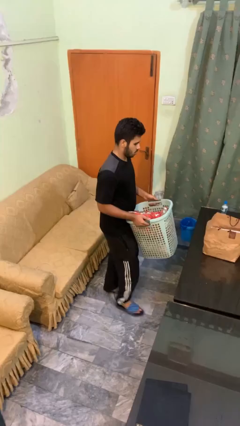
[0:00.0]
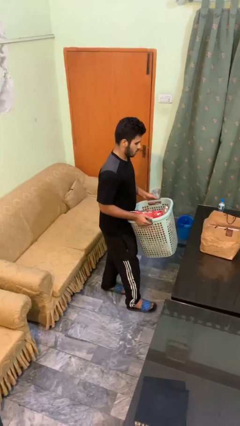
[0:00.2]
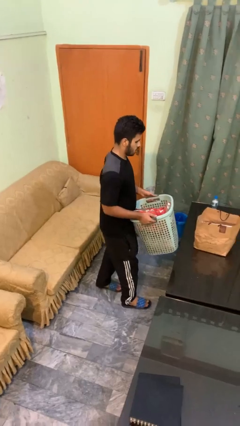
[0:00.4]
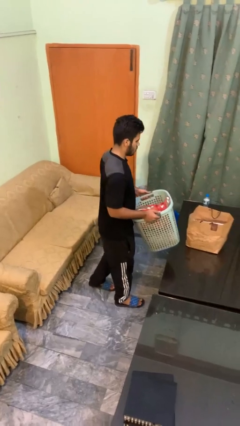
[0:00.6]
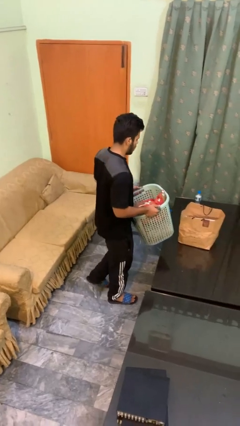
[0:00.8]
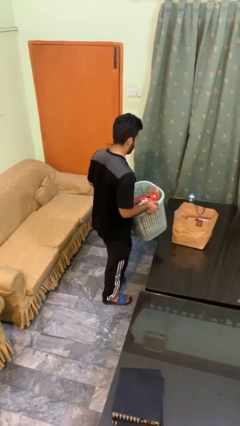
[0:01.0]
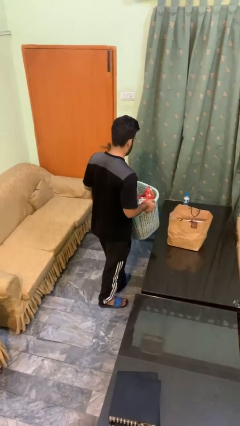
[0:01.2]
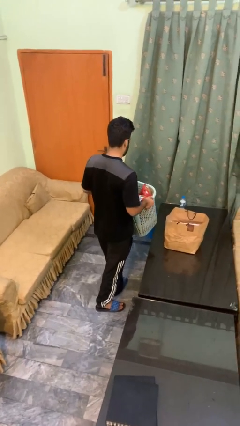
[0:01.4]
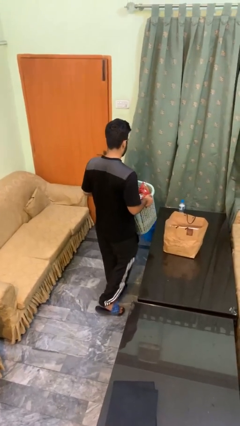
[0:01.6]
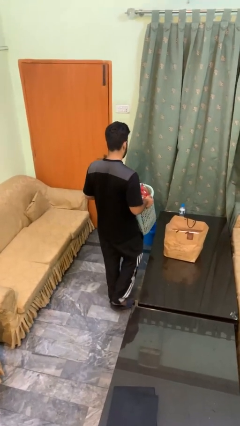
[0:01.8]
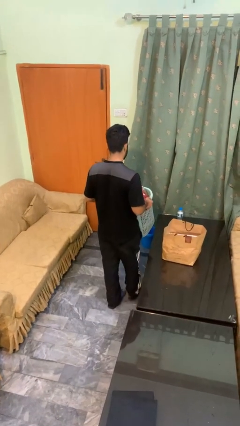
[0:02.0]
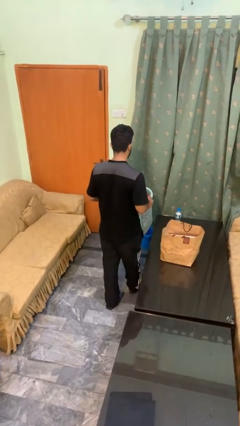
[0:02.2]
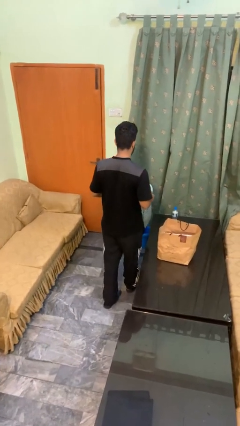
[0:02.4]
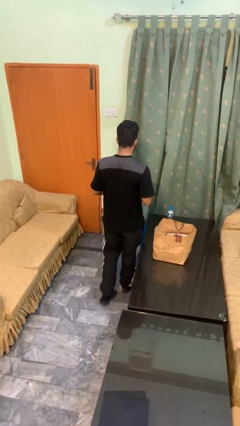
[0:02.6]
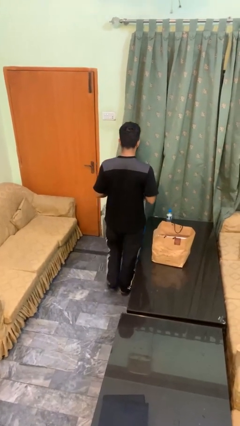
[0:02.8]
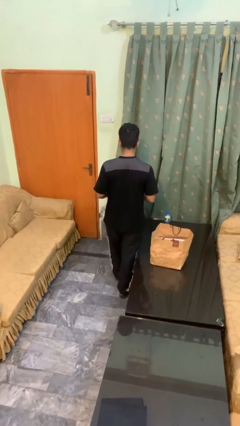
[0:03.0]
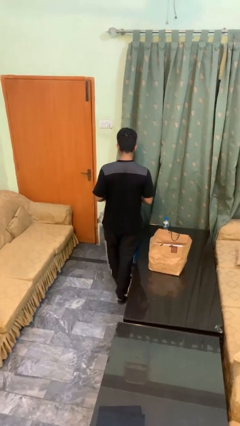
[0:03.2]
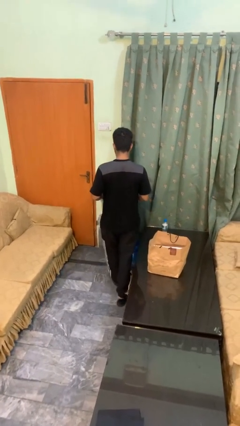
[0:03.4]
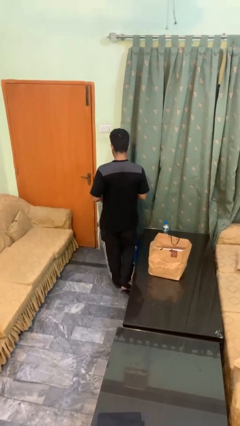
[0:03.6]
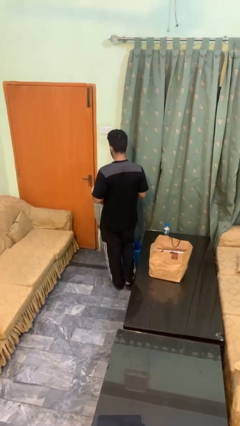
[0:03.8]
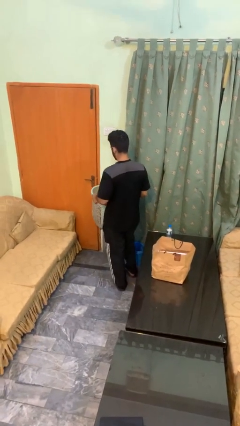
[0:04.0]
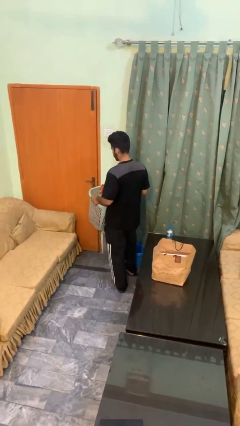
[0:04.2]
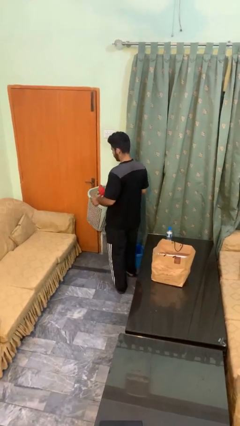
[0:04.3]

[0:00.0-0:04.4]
person carries laundry basket

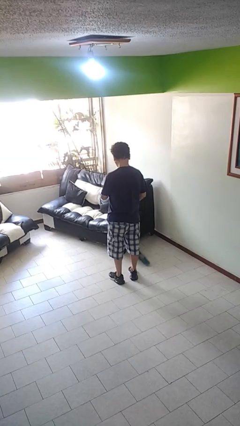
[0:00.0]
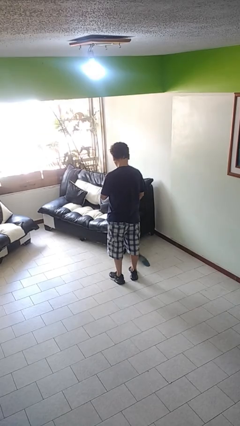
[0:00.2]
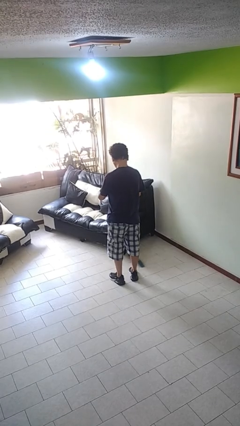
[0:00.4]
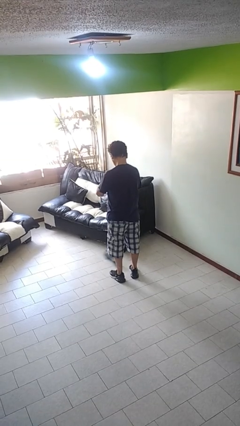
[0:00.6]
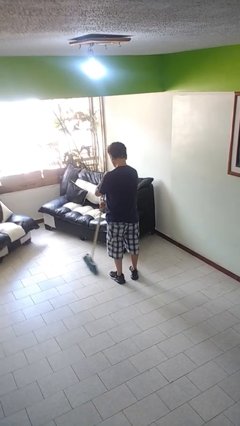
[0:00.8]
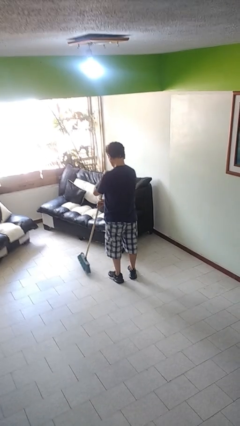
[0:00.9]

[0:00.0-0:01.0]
person sweeps floor

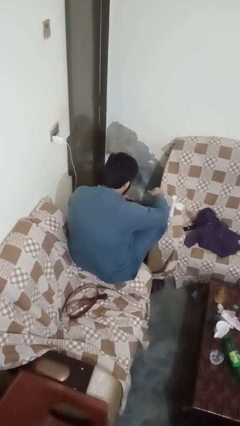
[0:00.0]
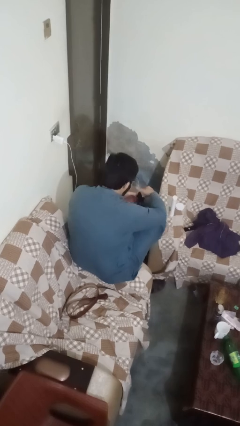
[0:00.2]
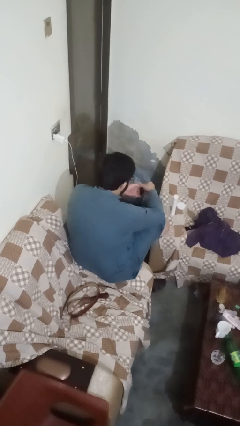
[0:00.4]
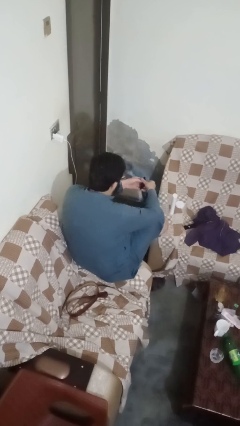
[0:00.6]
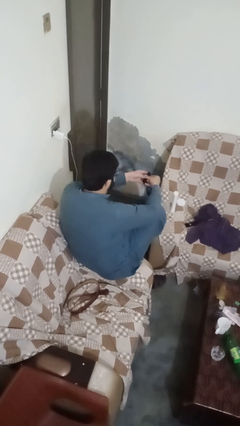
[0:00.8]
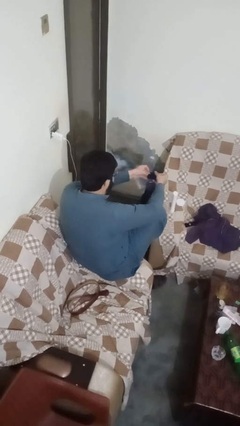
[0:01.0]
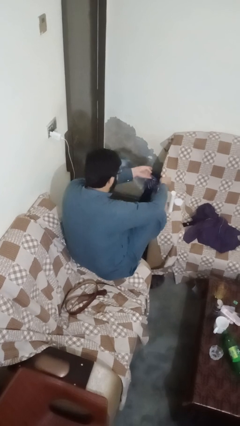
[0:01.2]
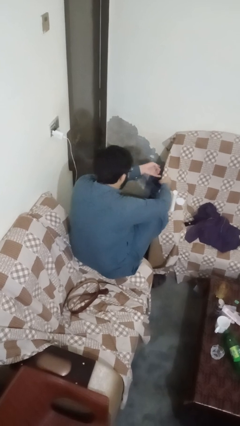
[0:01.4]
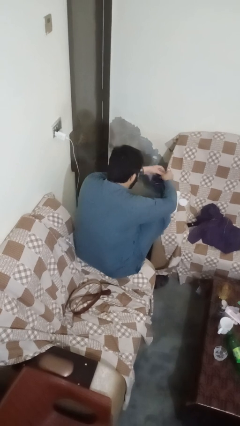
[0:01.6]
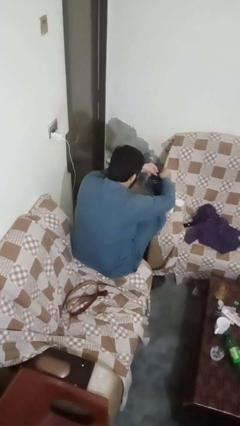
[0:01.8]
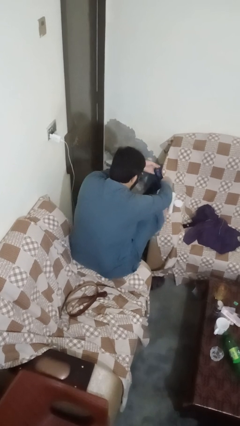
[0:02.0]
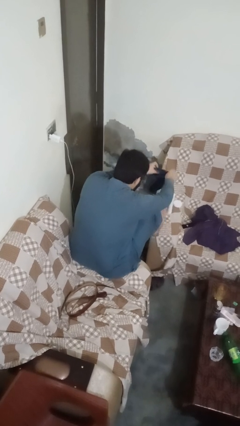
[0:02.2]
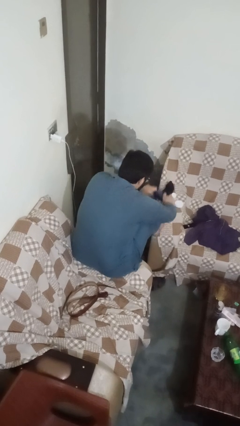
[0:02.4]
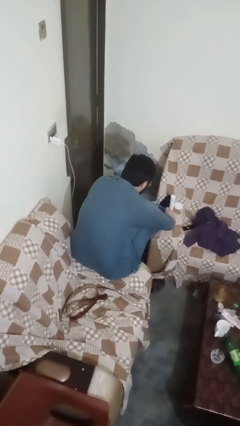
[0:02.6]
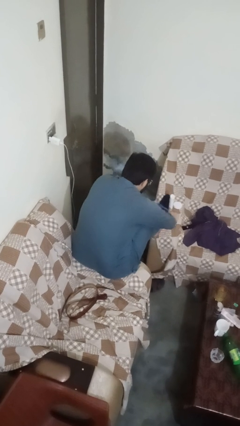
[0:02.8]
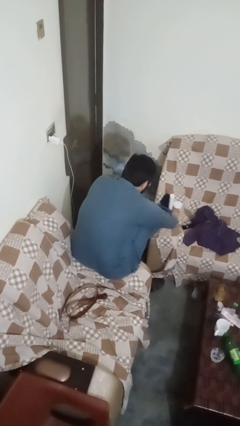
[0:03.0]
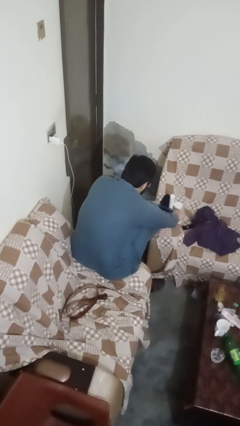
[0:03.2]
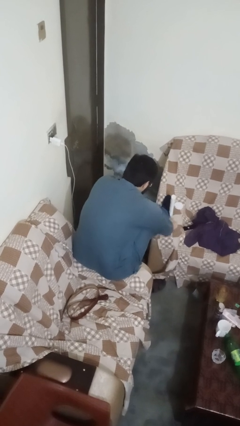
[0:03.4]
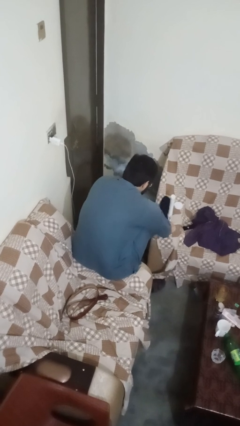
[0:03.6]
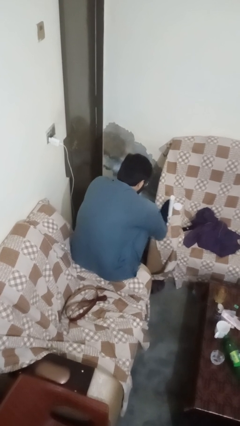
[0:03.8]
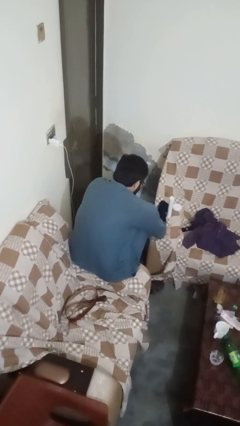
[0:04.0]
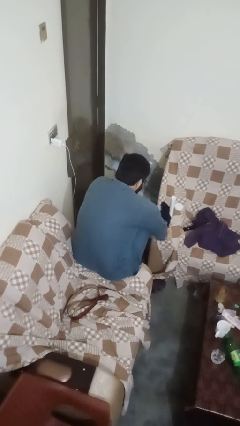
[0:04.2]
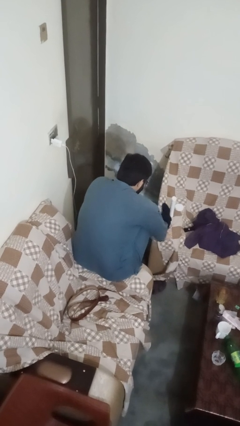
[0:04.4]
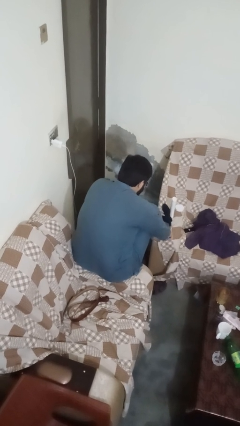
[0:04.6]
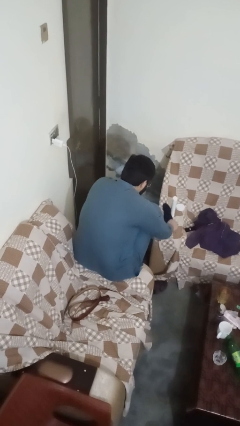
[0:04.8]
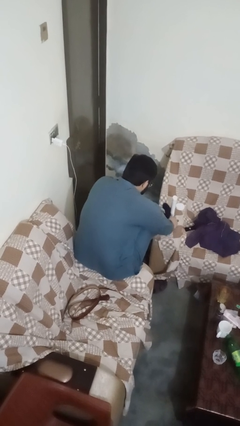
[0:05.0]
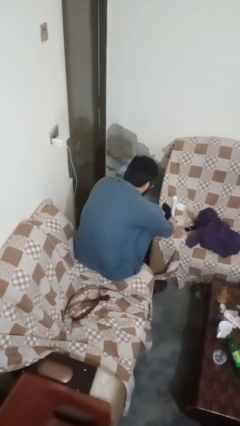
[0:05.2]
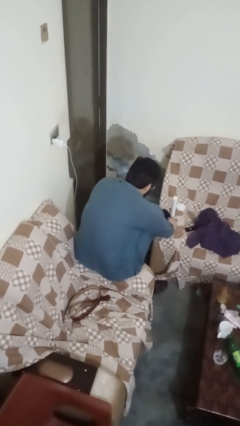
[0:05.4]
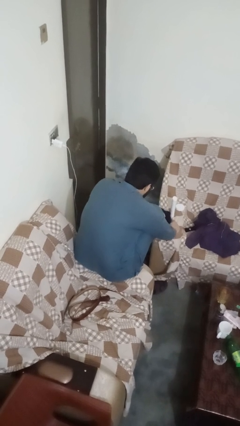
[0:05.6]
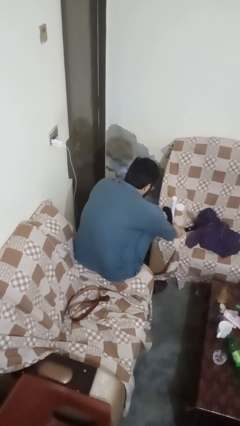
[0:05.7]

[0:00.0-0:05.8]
person puts on socks

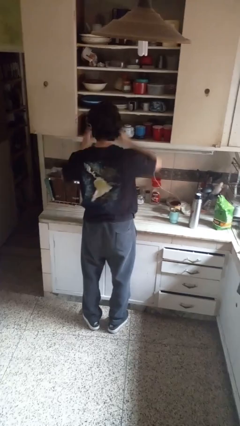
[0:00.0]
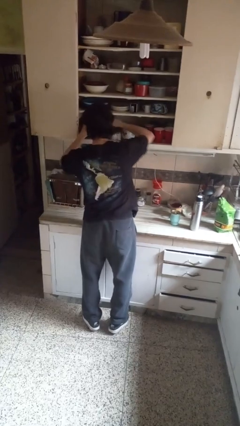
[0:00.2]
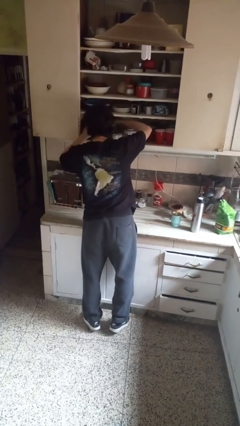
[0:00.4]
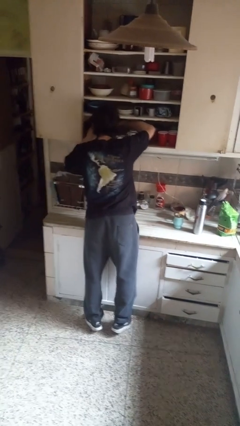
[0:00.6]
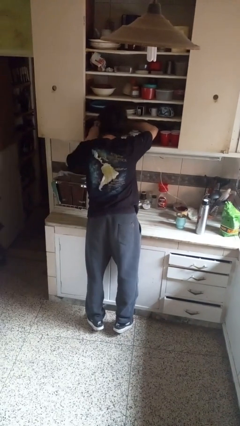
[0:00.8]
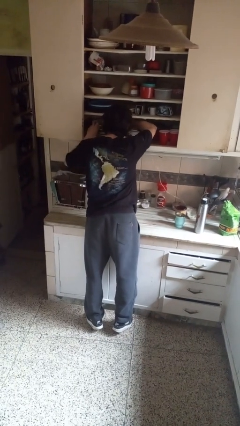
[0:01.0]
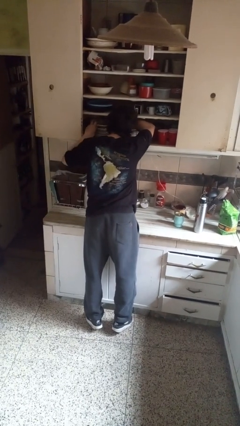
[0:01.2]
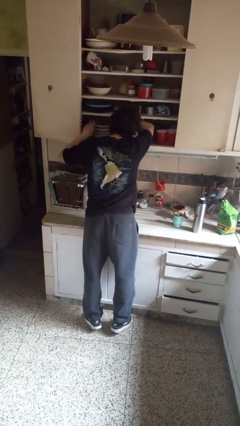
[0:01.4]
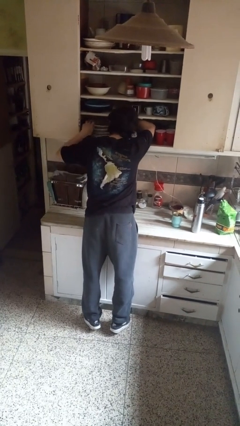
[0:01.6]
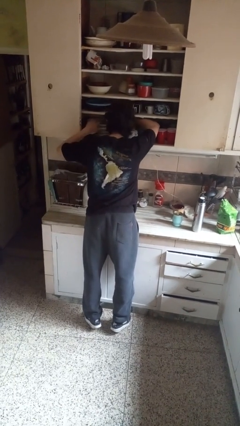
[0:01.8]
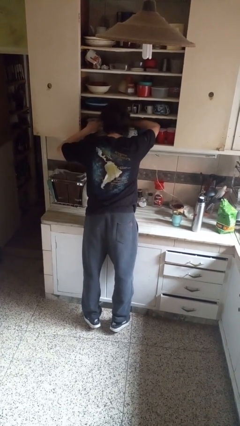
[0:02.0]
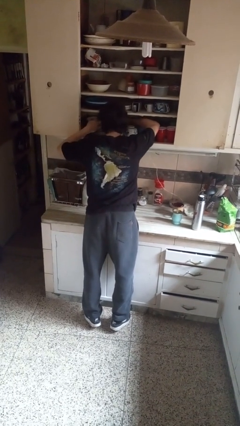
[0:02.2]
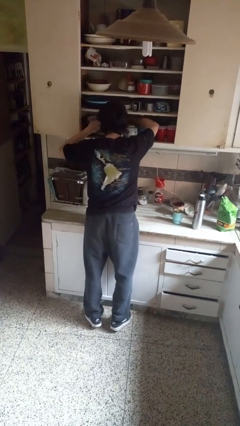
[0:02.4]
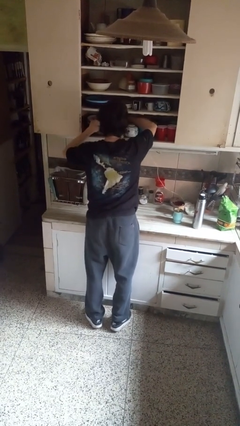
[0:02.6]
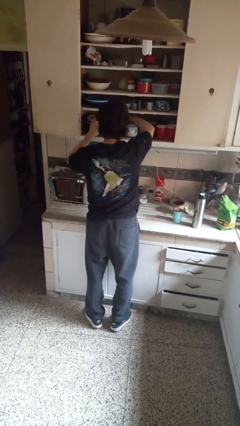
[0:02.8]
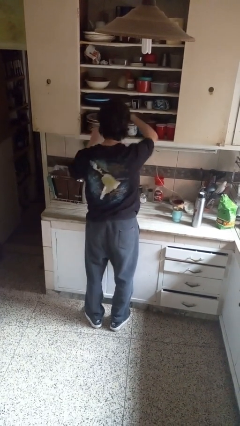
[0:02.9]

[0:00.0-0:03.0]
person searches in cabinet

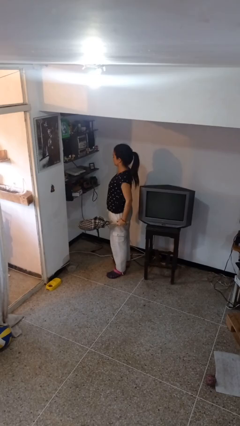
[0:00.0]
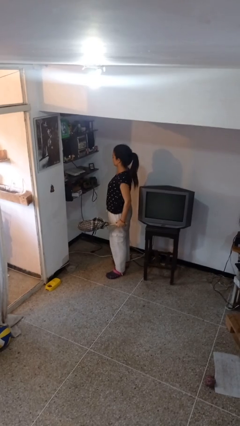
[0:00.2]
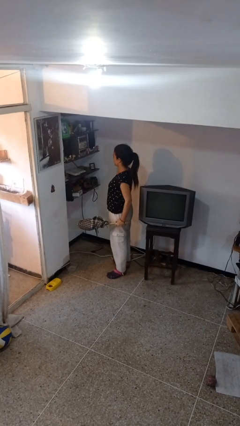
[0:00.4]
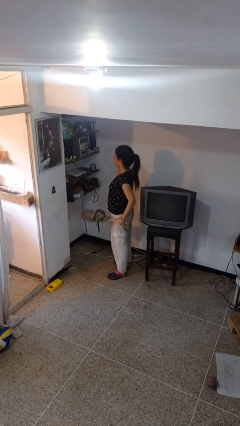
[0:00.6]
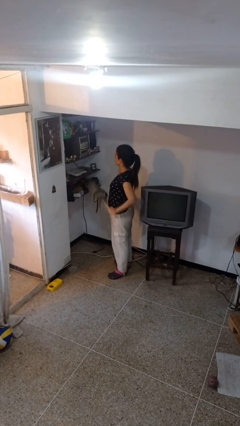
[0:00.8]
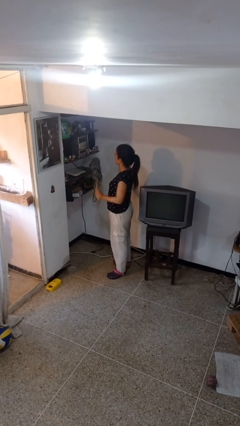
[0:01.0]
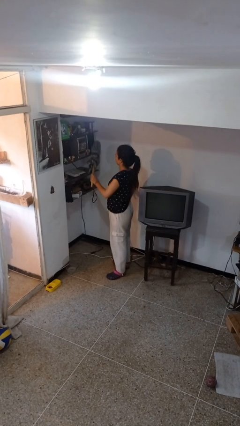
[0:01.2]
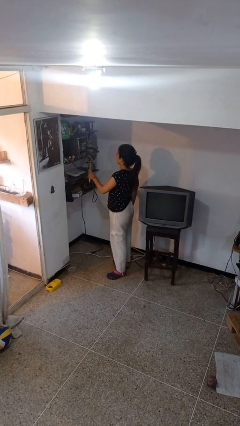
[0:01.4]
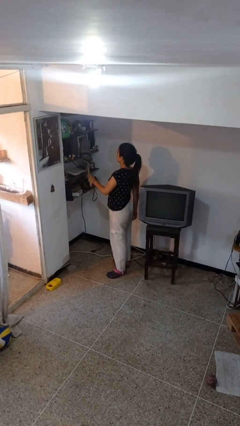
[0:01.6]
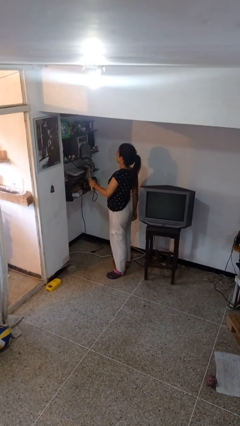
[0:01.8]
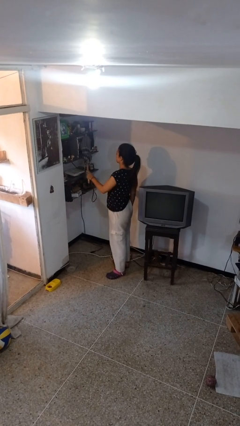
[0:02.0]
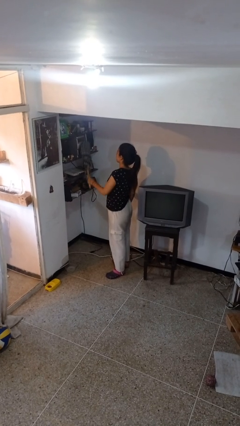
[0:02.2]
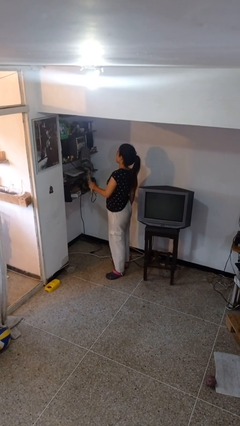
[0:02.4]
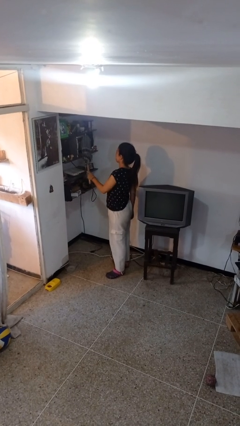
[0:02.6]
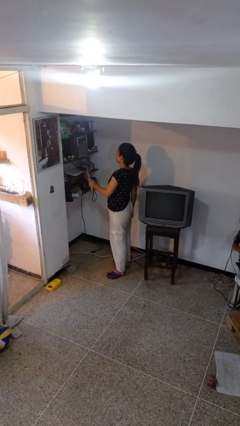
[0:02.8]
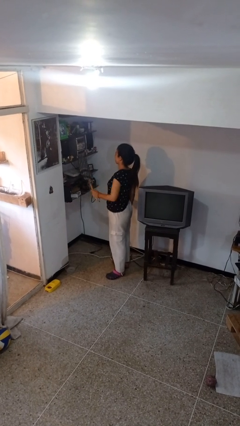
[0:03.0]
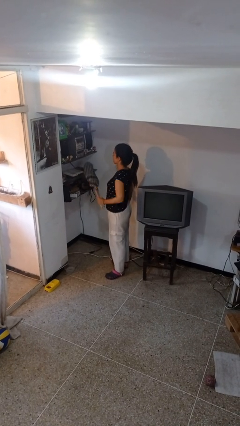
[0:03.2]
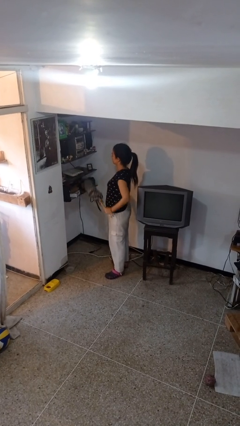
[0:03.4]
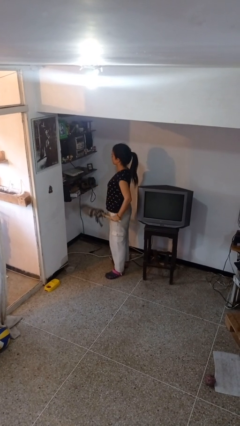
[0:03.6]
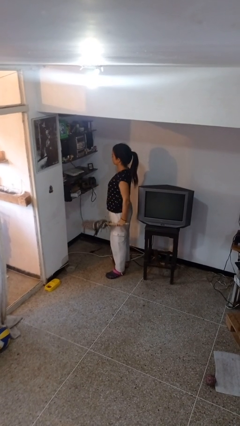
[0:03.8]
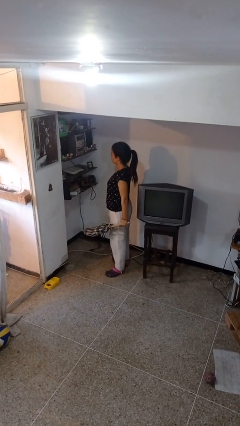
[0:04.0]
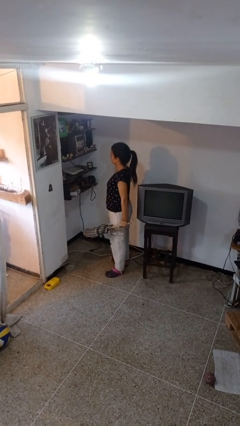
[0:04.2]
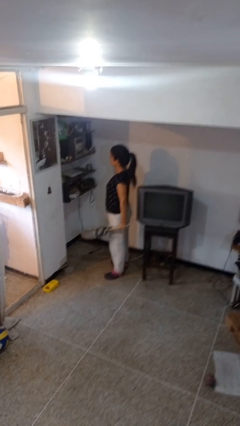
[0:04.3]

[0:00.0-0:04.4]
person dusts furniture
